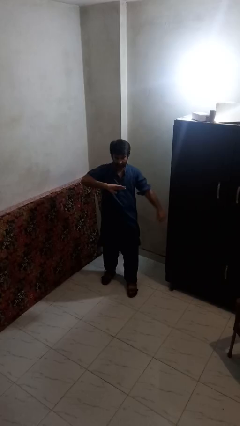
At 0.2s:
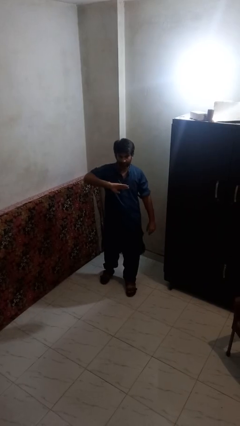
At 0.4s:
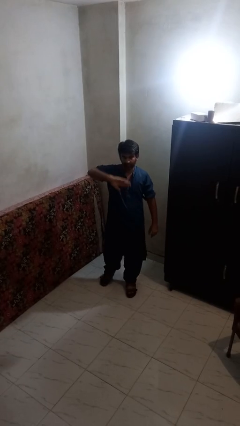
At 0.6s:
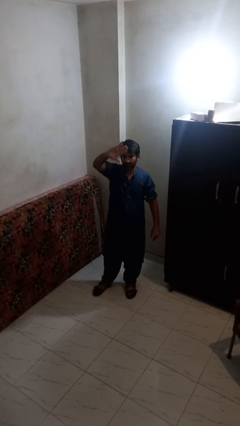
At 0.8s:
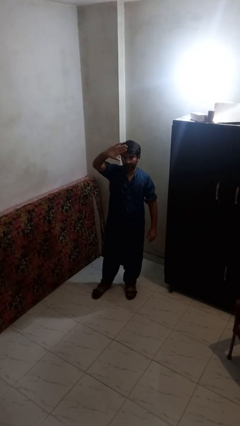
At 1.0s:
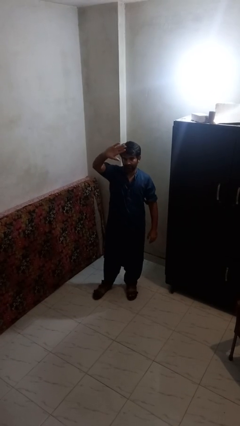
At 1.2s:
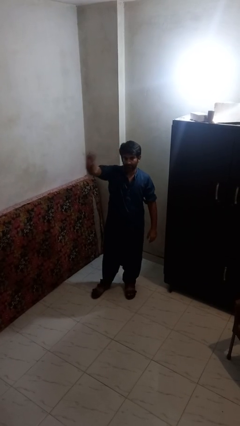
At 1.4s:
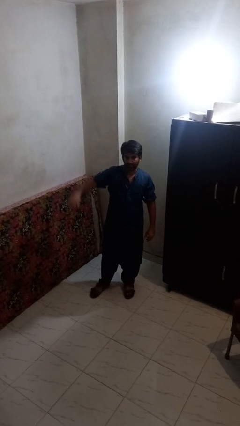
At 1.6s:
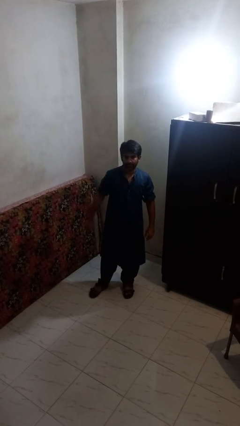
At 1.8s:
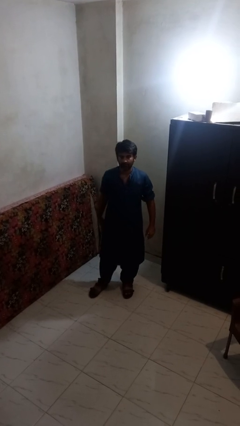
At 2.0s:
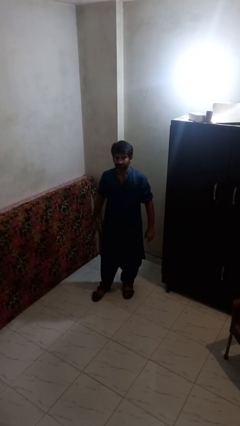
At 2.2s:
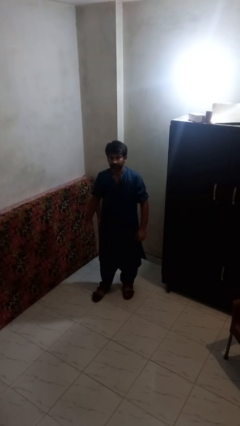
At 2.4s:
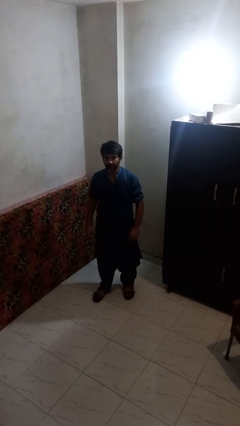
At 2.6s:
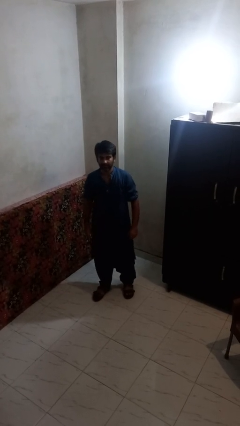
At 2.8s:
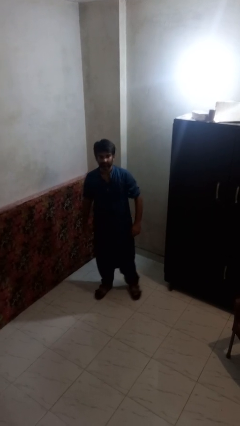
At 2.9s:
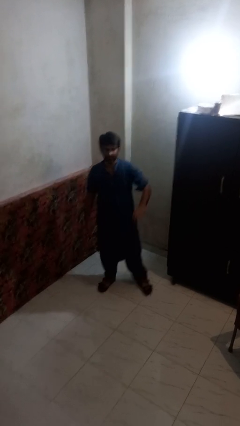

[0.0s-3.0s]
person gestures swipe up

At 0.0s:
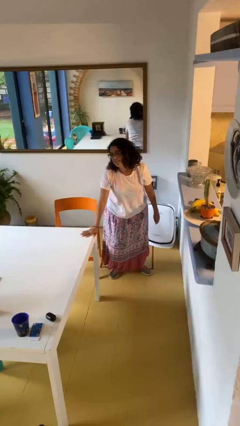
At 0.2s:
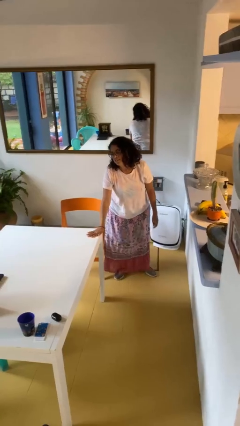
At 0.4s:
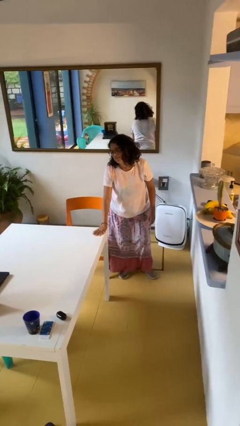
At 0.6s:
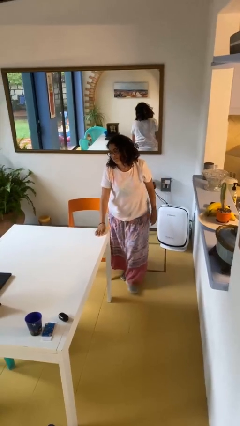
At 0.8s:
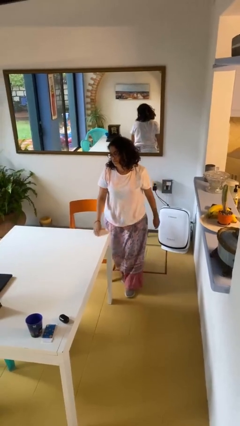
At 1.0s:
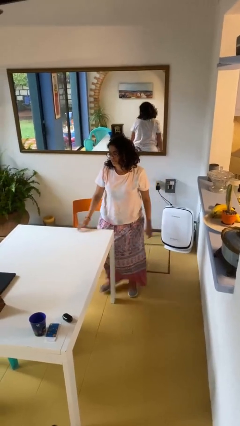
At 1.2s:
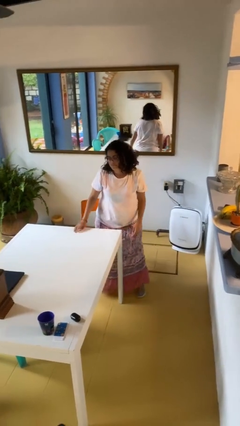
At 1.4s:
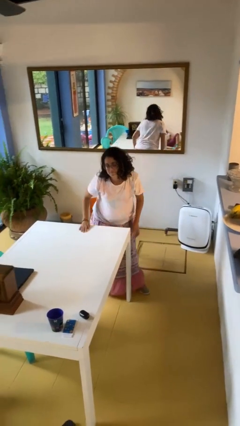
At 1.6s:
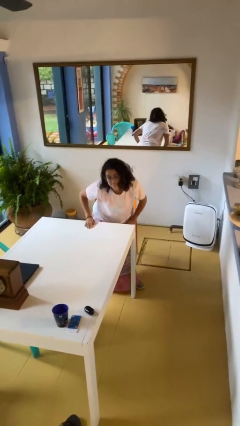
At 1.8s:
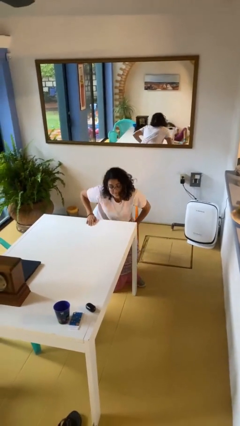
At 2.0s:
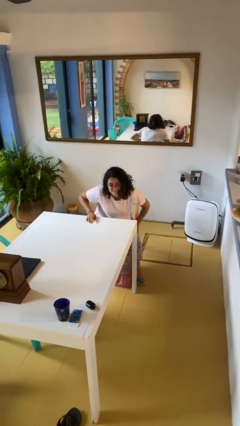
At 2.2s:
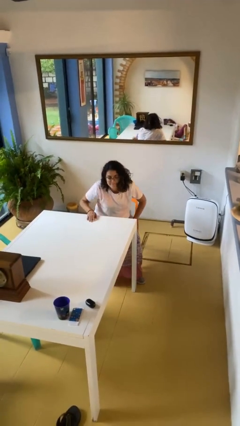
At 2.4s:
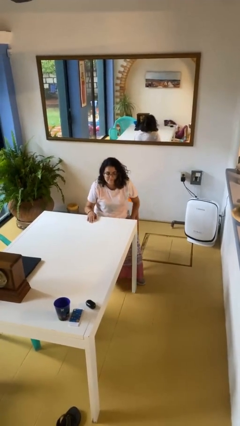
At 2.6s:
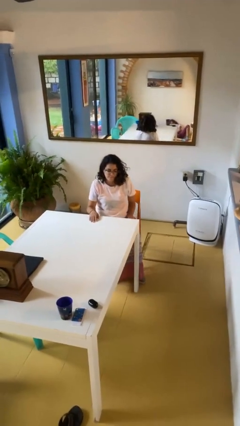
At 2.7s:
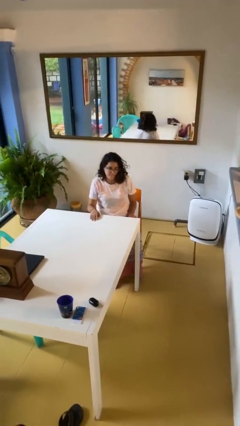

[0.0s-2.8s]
person sits down

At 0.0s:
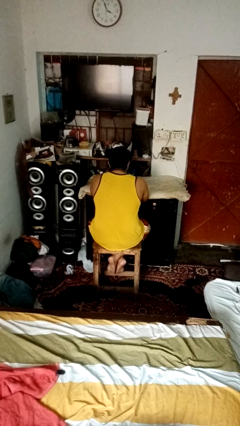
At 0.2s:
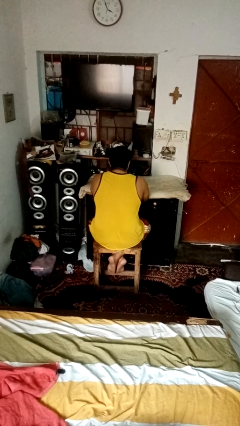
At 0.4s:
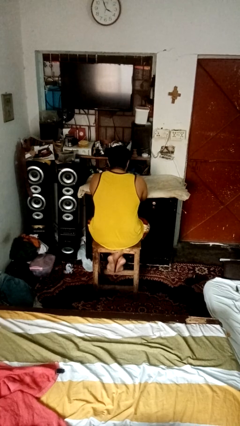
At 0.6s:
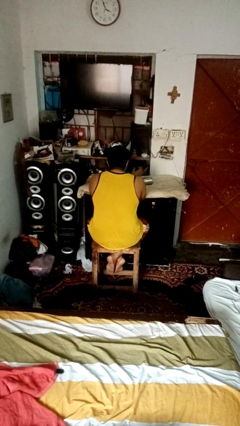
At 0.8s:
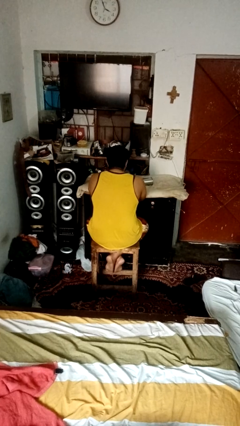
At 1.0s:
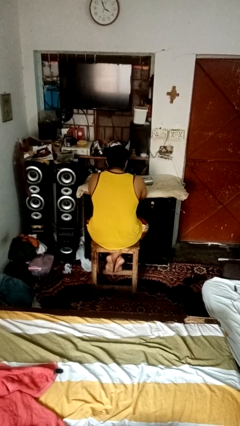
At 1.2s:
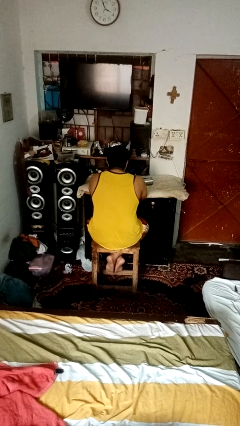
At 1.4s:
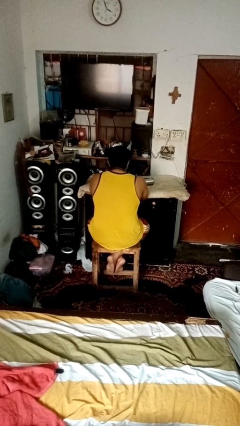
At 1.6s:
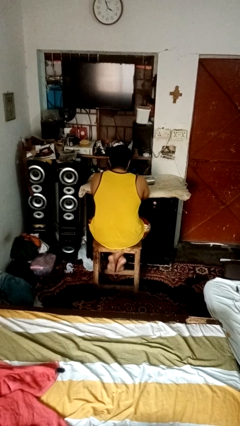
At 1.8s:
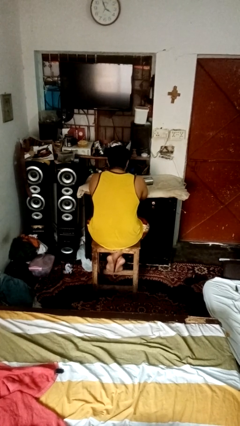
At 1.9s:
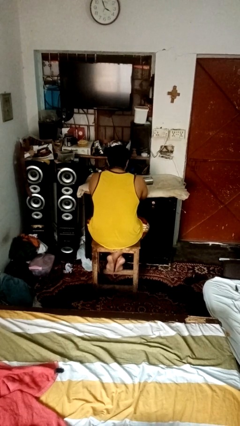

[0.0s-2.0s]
person knocks over glass

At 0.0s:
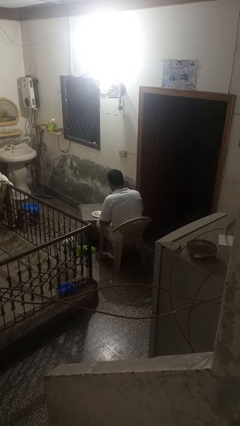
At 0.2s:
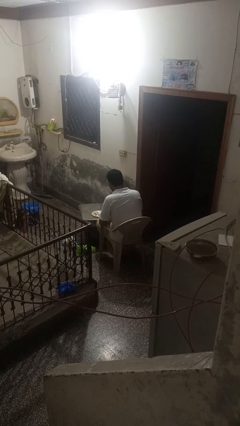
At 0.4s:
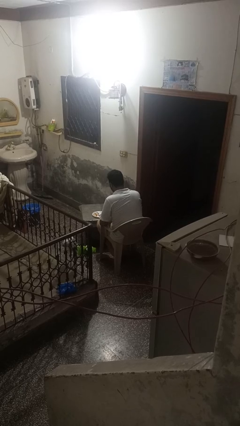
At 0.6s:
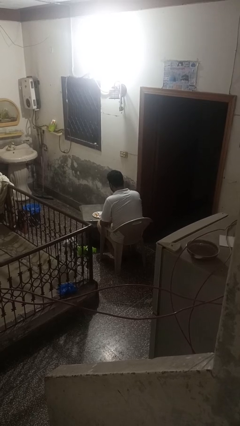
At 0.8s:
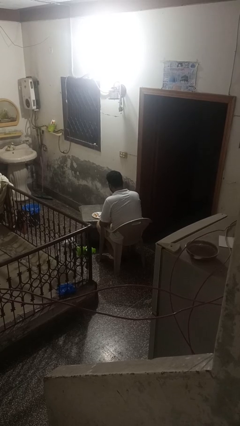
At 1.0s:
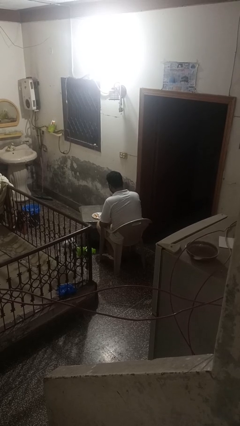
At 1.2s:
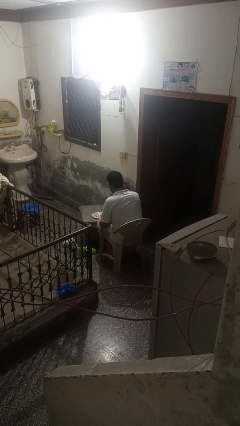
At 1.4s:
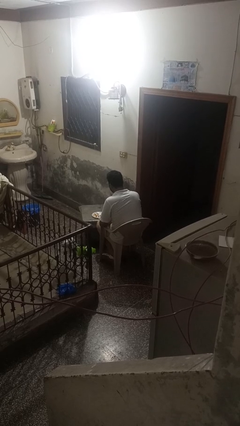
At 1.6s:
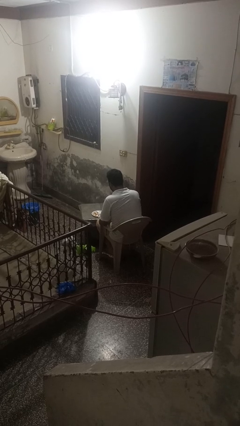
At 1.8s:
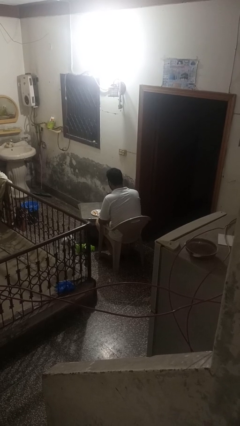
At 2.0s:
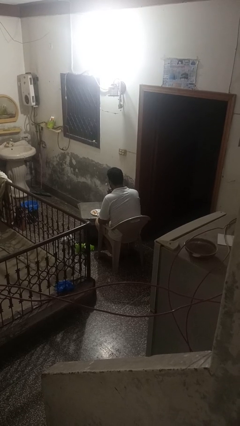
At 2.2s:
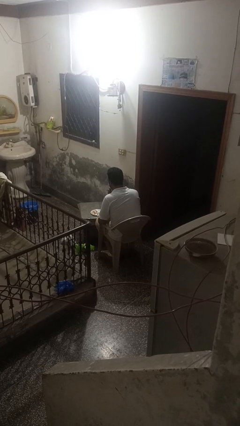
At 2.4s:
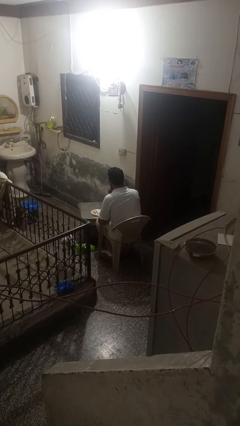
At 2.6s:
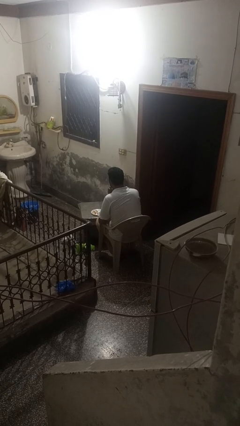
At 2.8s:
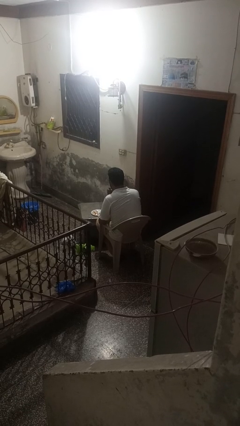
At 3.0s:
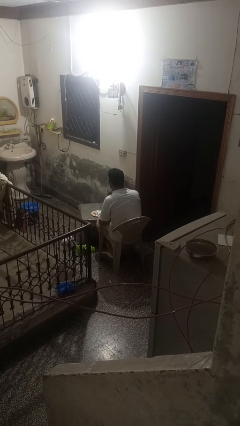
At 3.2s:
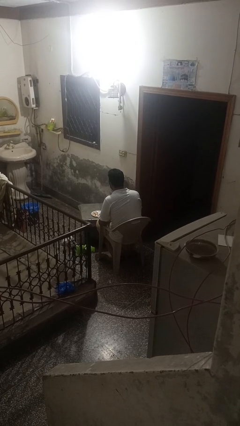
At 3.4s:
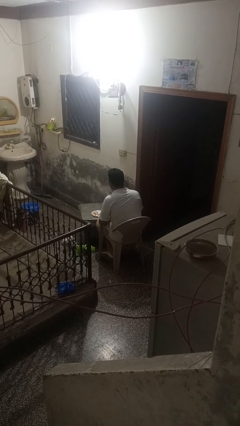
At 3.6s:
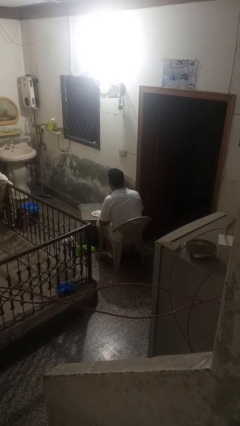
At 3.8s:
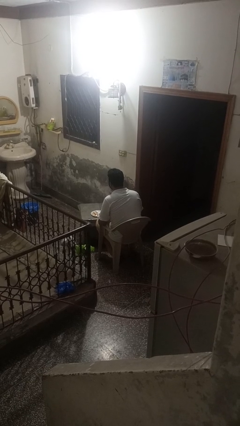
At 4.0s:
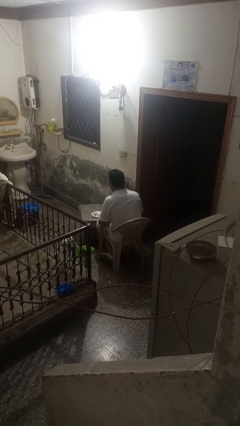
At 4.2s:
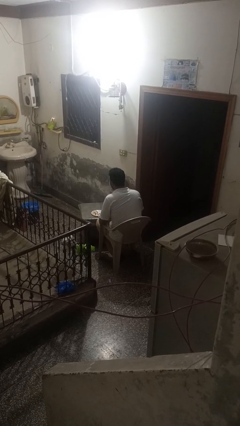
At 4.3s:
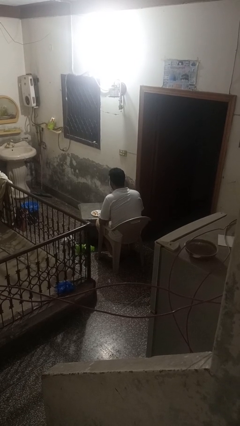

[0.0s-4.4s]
person eats with utensil

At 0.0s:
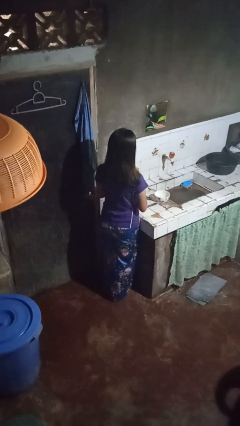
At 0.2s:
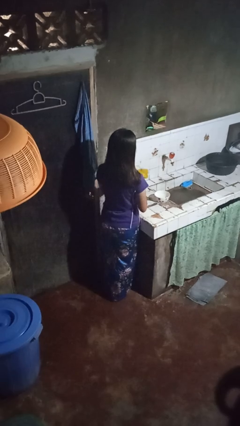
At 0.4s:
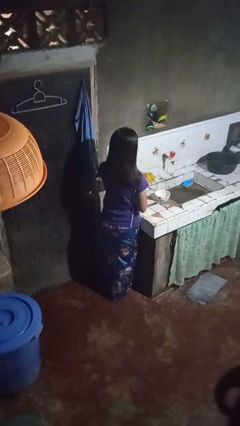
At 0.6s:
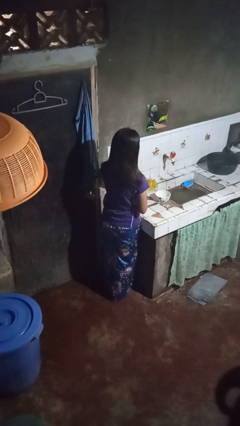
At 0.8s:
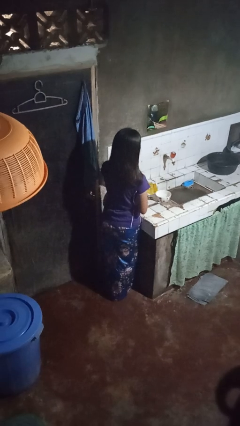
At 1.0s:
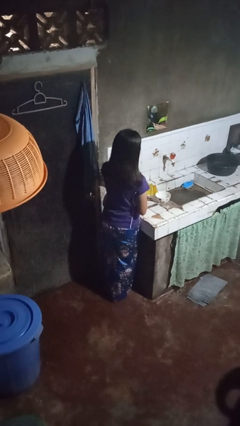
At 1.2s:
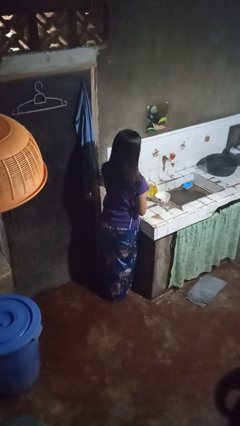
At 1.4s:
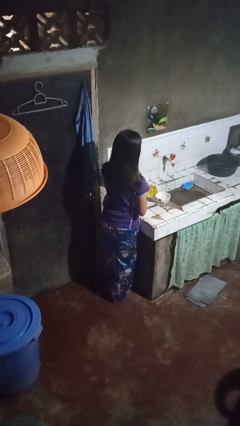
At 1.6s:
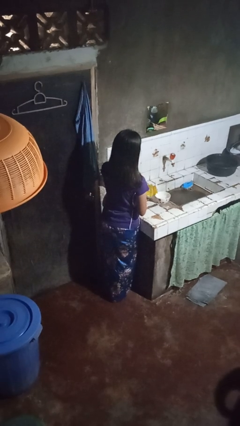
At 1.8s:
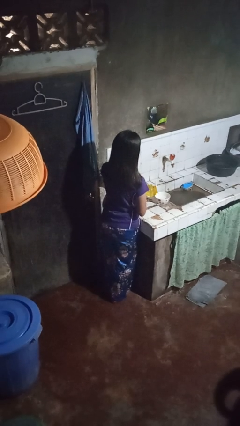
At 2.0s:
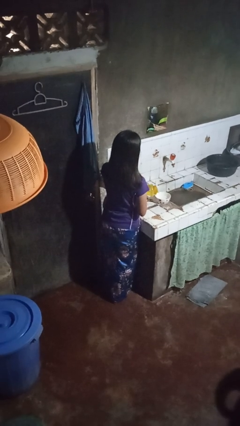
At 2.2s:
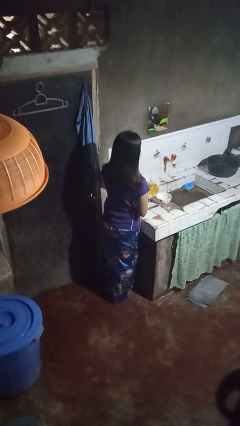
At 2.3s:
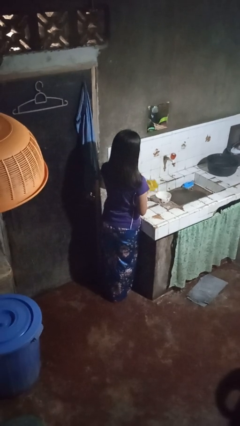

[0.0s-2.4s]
person pours into bowl

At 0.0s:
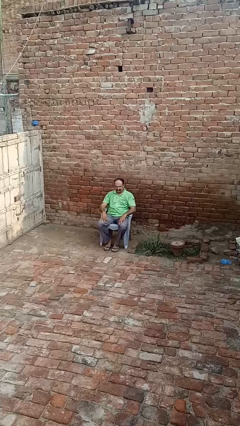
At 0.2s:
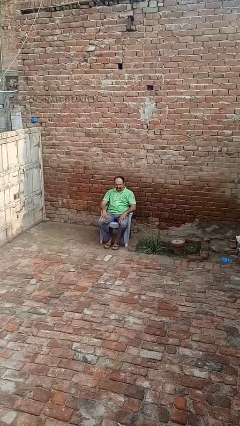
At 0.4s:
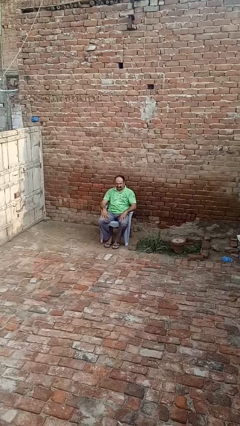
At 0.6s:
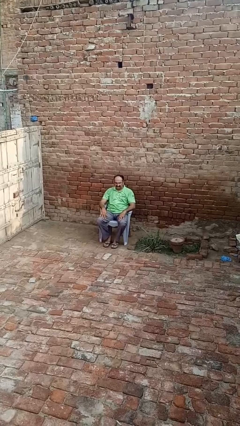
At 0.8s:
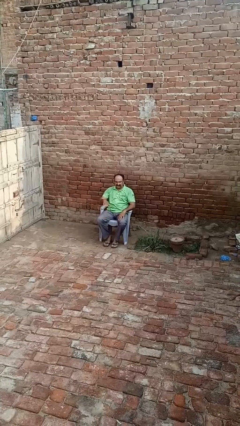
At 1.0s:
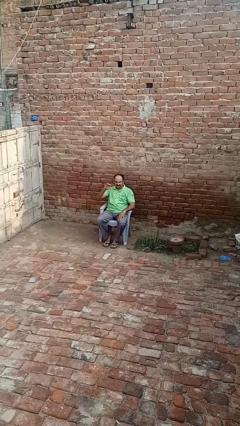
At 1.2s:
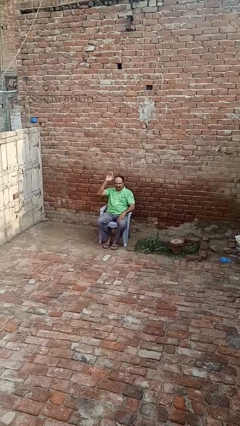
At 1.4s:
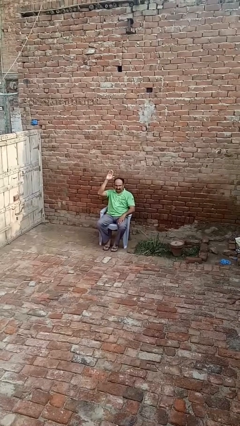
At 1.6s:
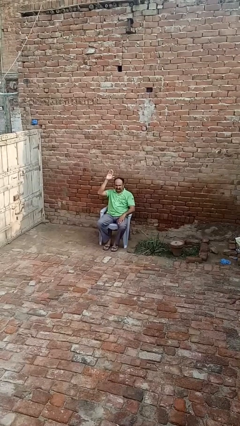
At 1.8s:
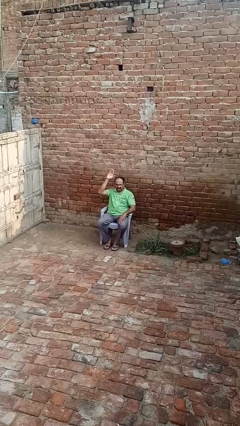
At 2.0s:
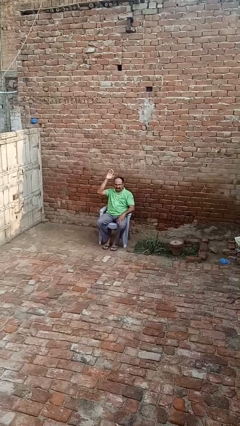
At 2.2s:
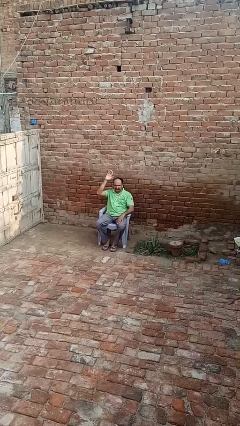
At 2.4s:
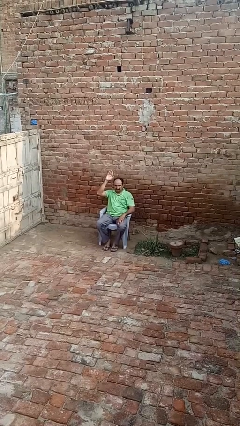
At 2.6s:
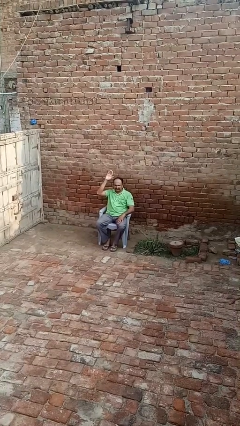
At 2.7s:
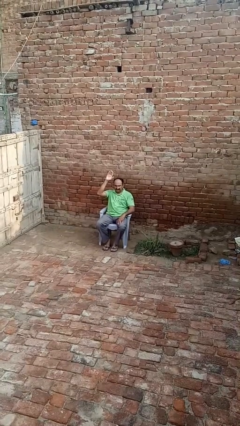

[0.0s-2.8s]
person gestures raise hand
